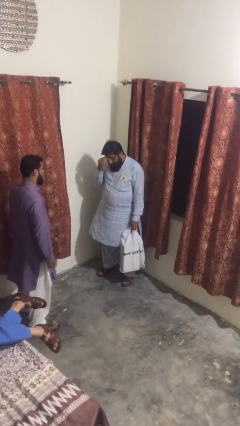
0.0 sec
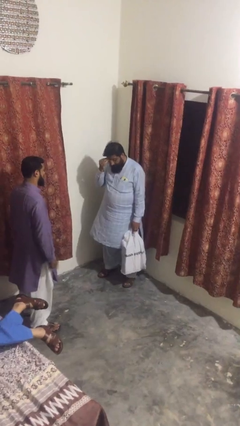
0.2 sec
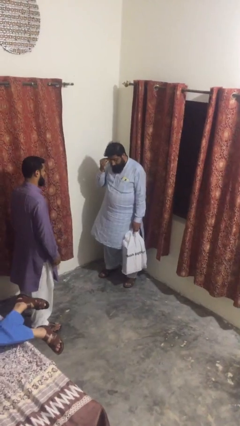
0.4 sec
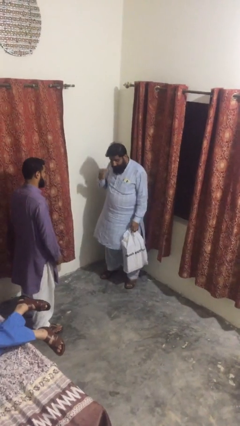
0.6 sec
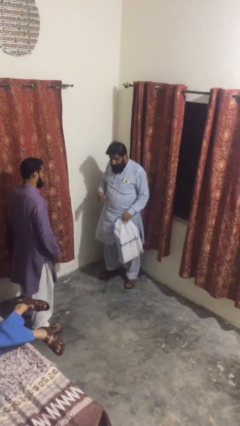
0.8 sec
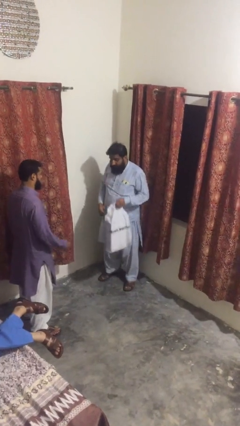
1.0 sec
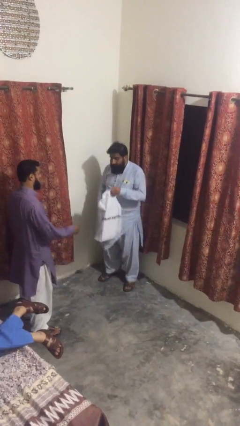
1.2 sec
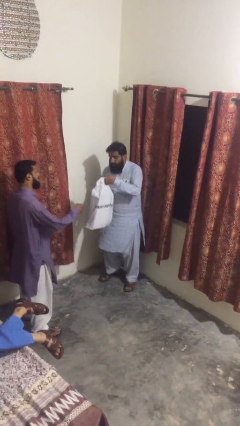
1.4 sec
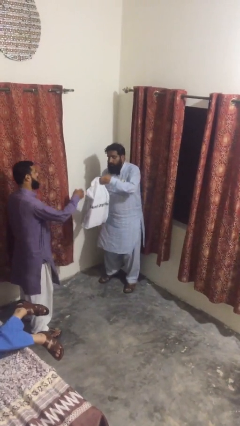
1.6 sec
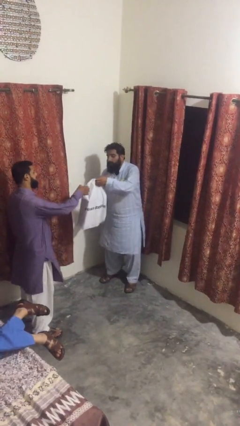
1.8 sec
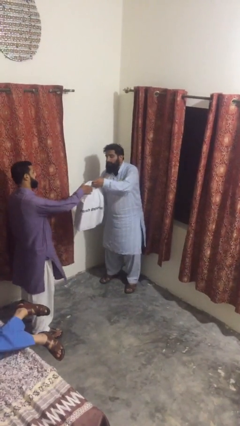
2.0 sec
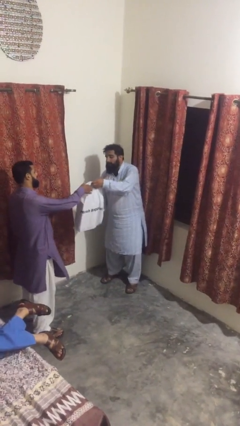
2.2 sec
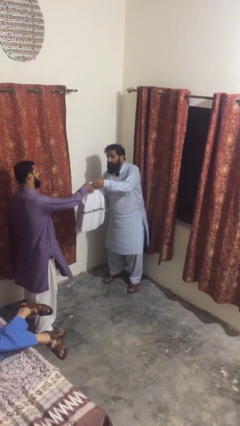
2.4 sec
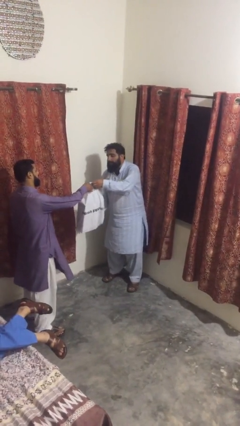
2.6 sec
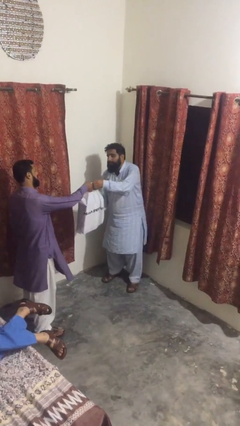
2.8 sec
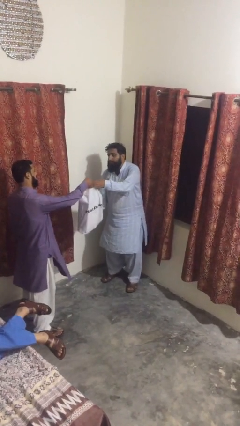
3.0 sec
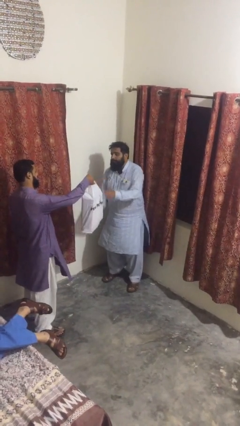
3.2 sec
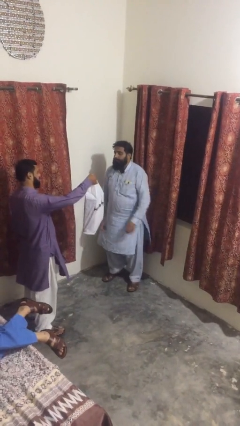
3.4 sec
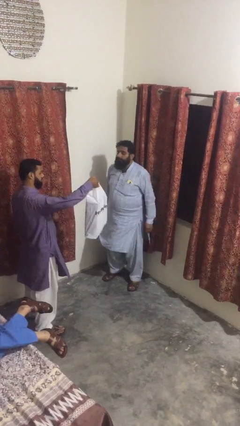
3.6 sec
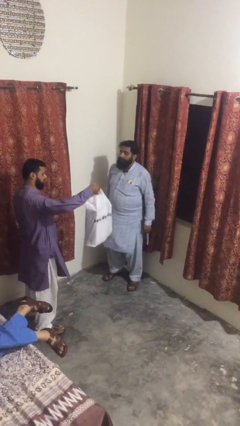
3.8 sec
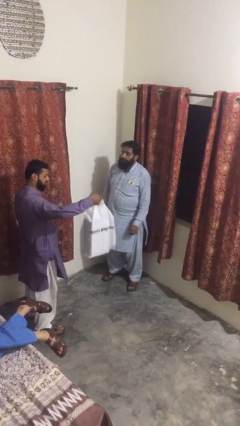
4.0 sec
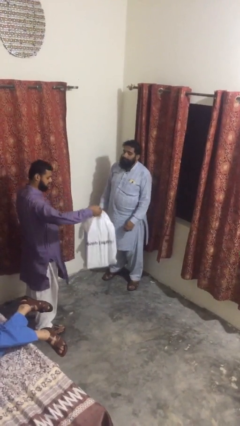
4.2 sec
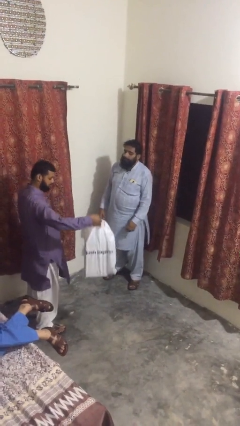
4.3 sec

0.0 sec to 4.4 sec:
person transfers object to person

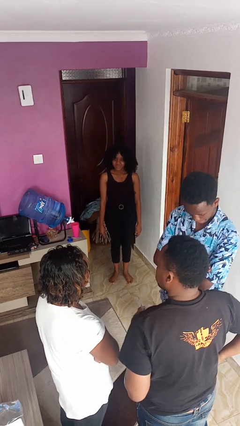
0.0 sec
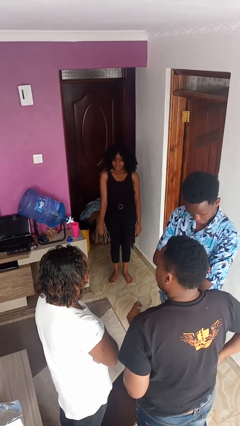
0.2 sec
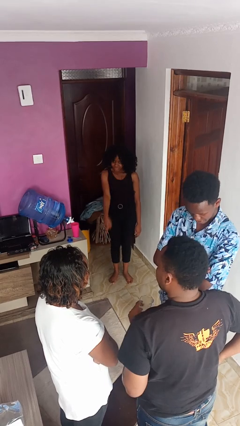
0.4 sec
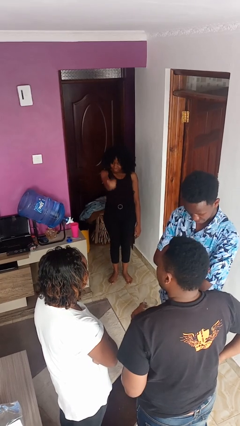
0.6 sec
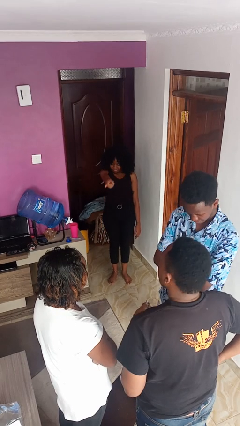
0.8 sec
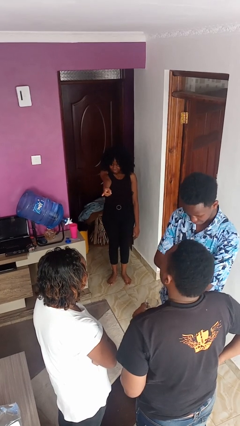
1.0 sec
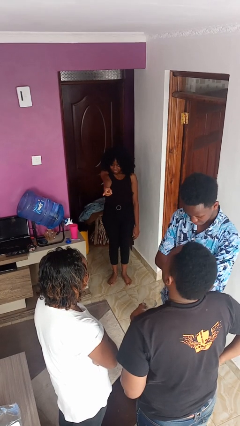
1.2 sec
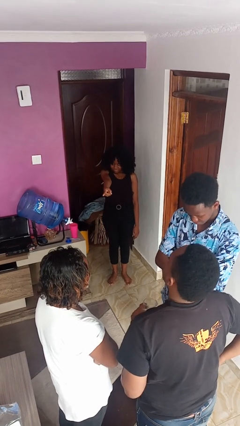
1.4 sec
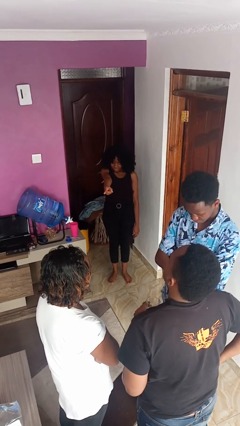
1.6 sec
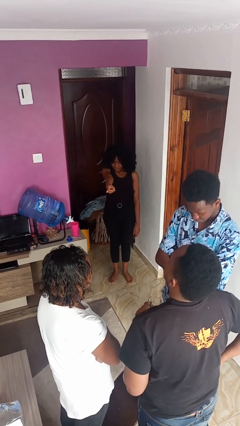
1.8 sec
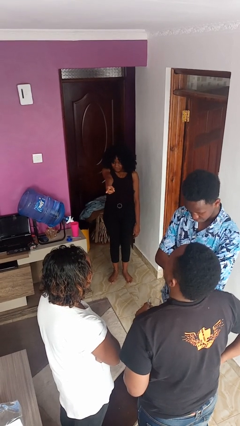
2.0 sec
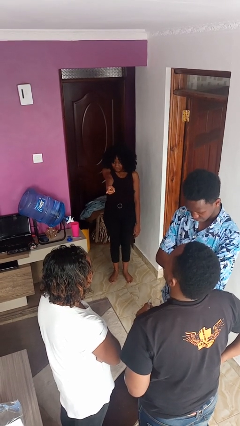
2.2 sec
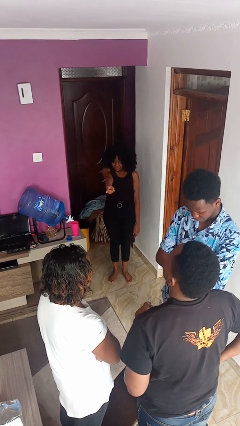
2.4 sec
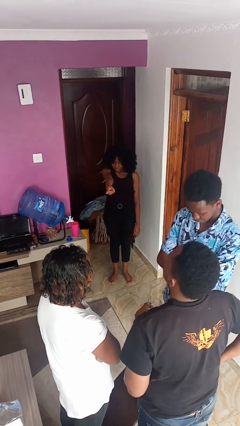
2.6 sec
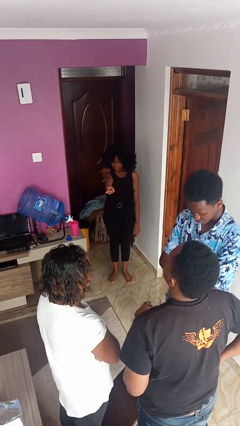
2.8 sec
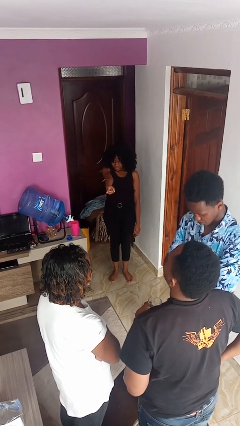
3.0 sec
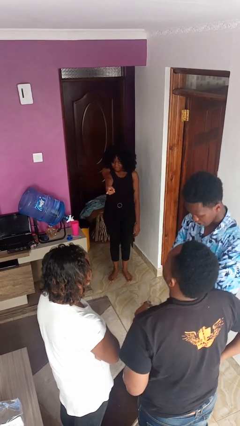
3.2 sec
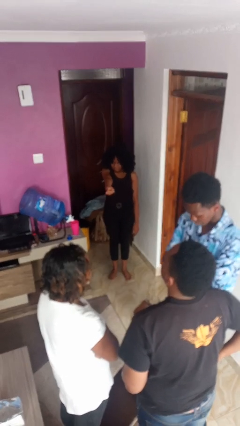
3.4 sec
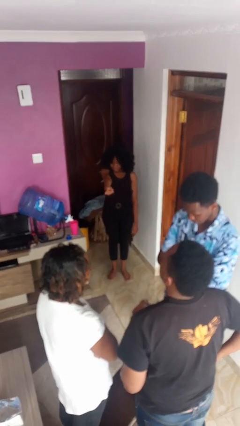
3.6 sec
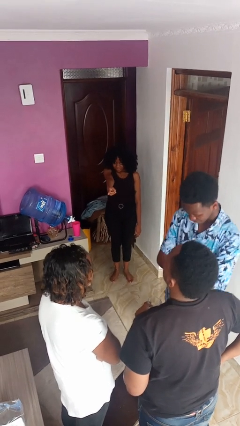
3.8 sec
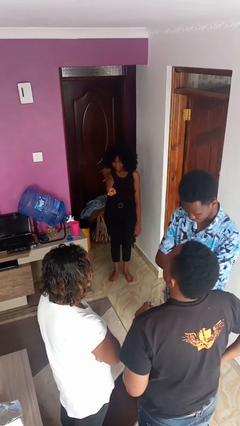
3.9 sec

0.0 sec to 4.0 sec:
person points at person

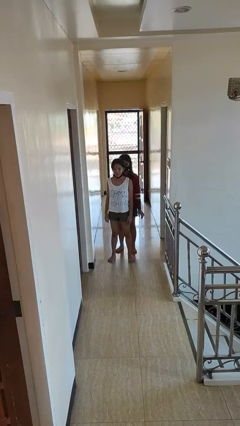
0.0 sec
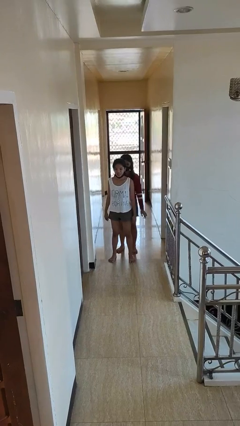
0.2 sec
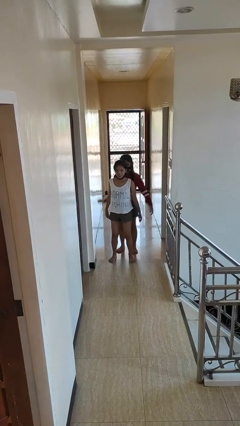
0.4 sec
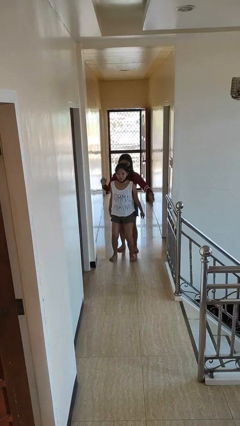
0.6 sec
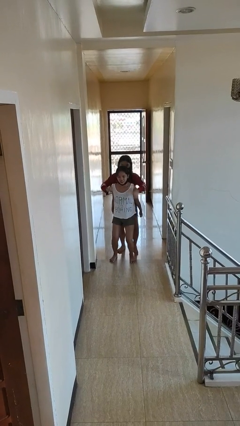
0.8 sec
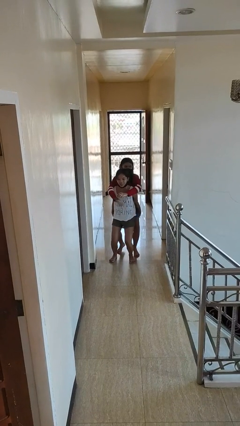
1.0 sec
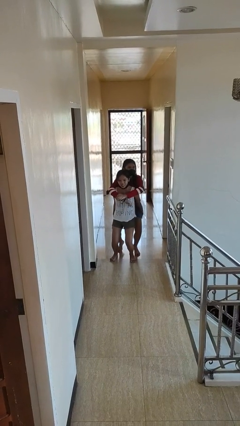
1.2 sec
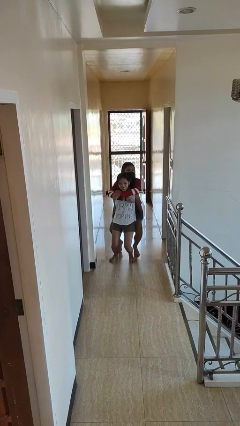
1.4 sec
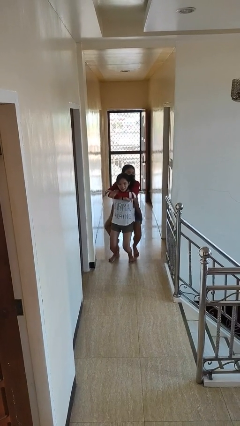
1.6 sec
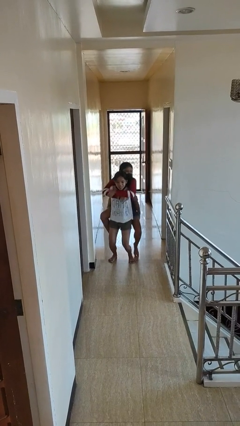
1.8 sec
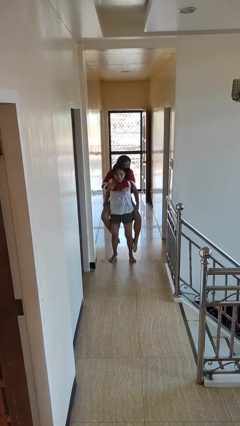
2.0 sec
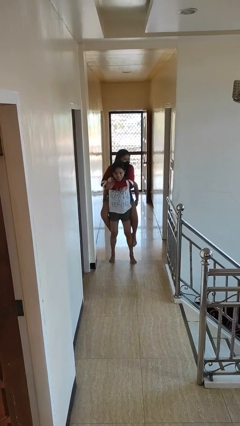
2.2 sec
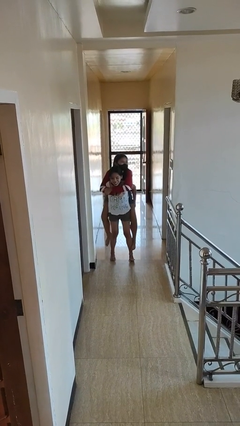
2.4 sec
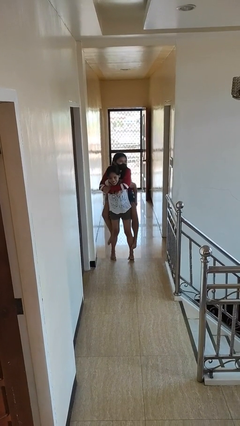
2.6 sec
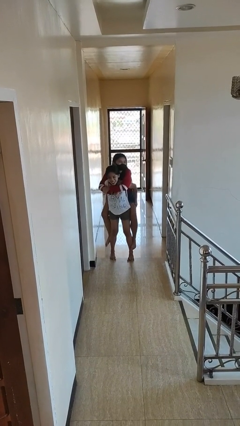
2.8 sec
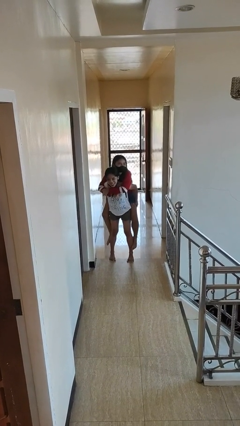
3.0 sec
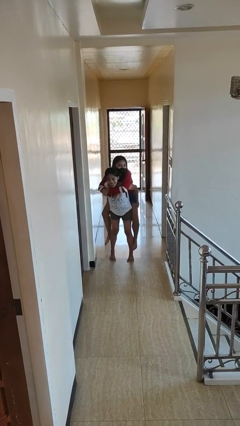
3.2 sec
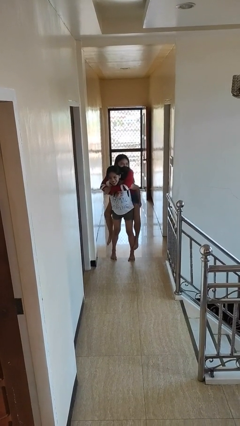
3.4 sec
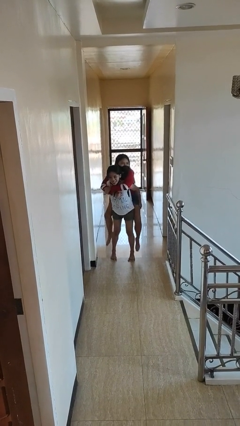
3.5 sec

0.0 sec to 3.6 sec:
person carries person over shoulder

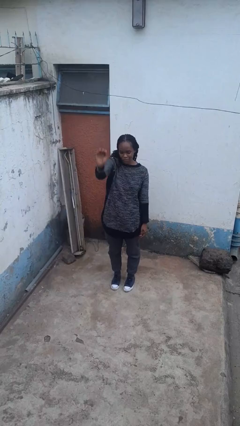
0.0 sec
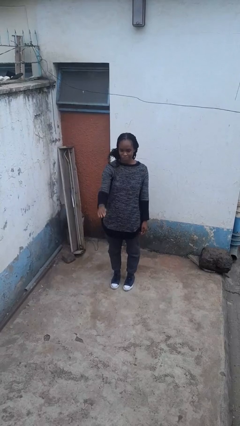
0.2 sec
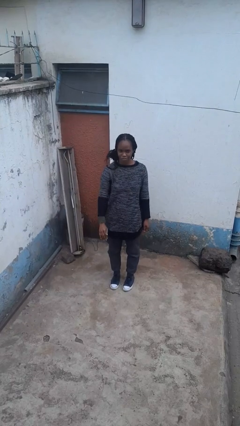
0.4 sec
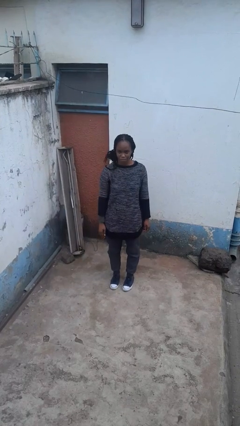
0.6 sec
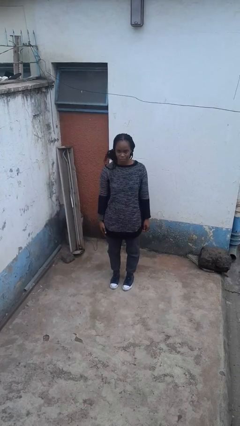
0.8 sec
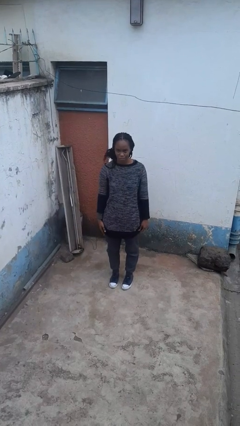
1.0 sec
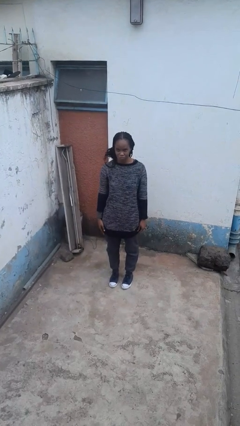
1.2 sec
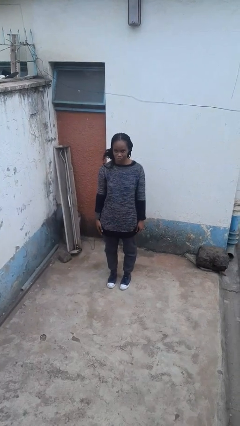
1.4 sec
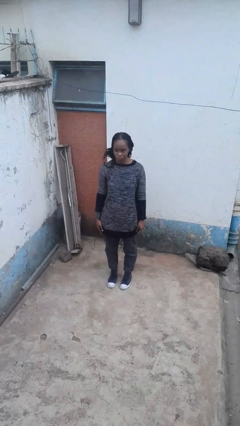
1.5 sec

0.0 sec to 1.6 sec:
person gestures lower hand

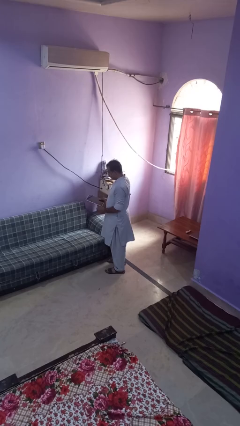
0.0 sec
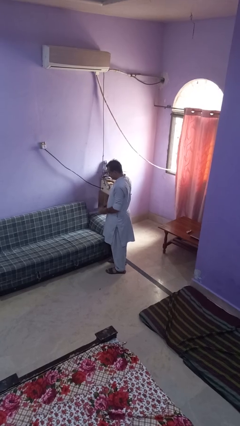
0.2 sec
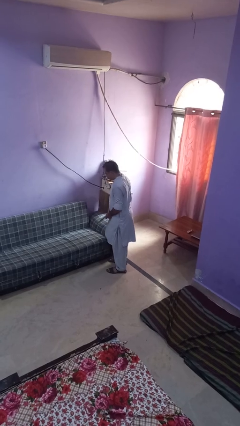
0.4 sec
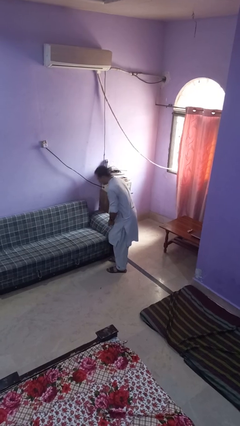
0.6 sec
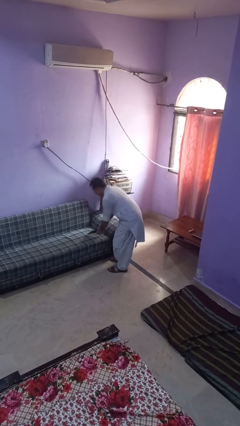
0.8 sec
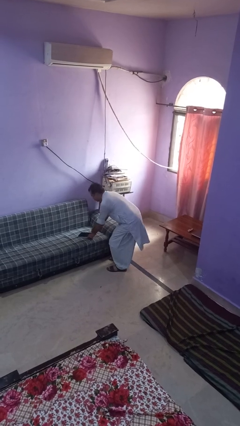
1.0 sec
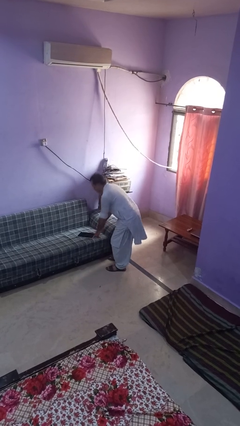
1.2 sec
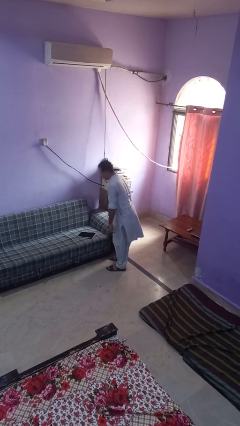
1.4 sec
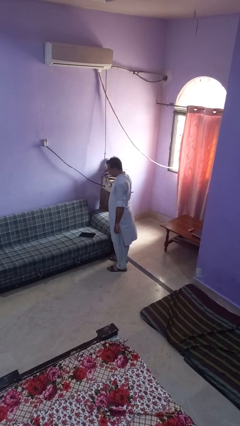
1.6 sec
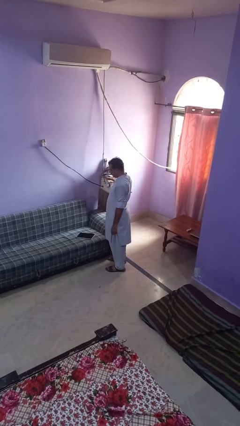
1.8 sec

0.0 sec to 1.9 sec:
person puts down object on couch

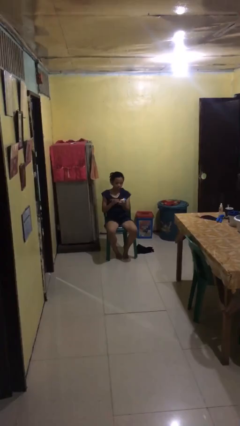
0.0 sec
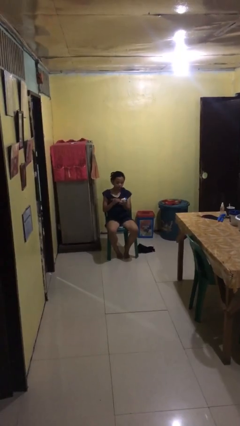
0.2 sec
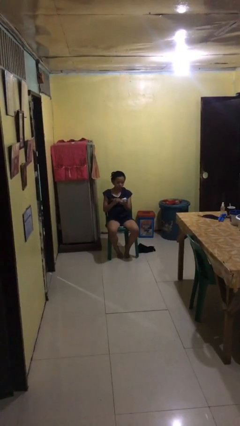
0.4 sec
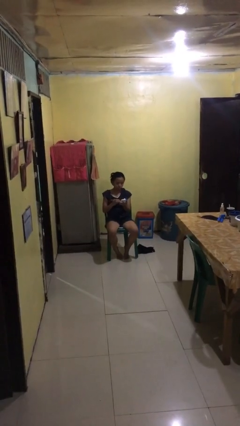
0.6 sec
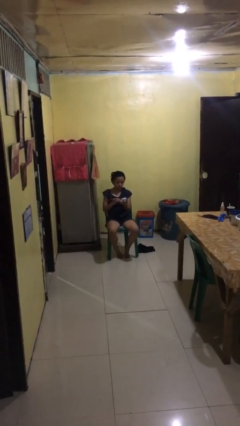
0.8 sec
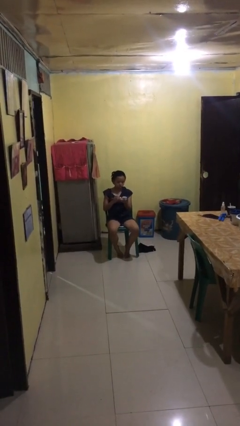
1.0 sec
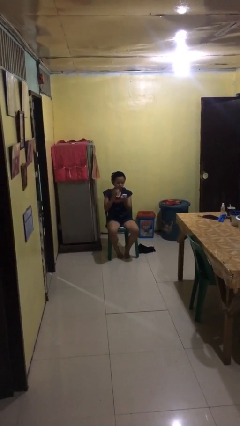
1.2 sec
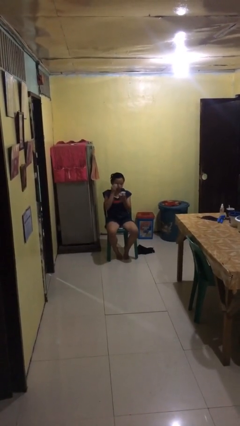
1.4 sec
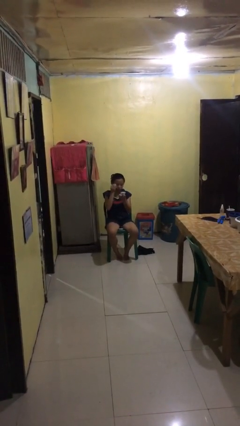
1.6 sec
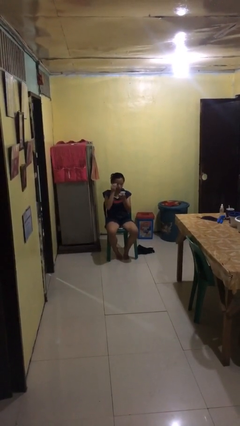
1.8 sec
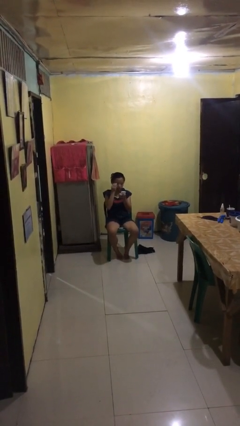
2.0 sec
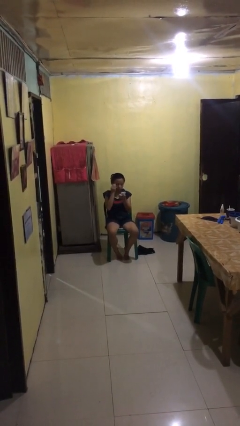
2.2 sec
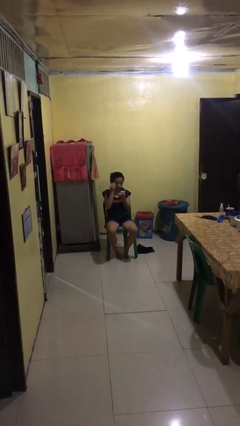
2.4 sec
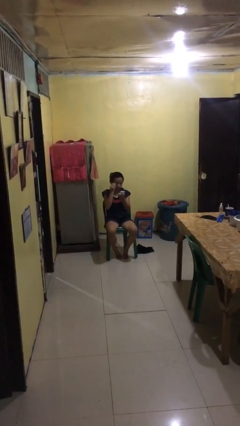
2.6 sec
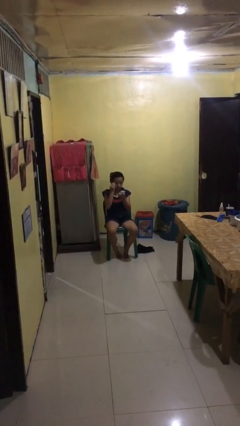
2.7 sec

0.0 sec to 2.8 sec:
person applies eye makeup
